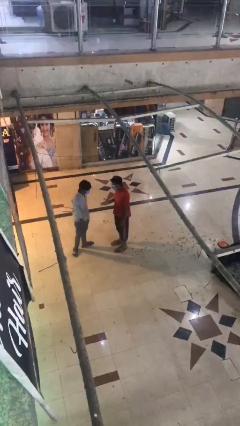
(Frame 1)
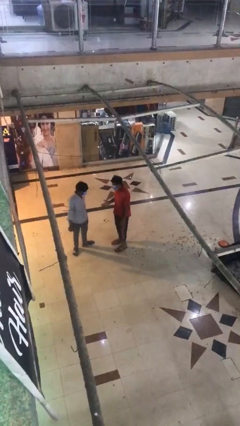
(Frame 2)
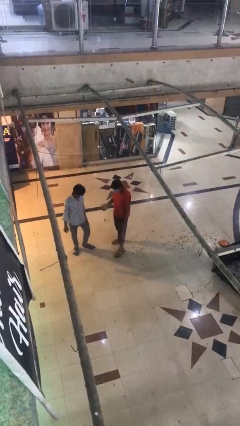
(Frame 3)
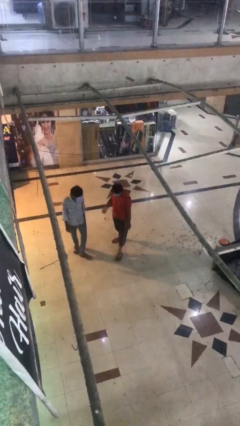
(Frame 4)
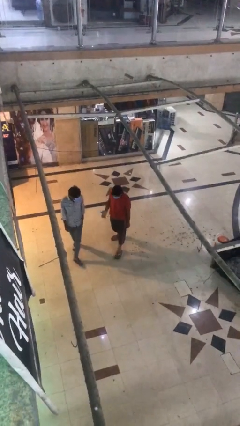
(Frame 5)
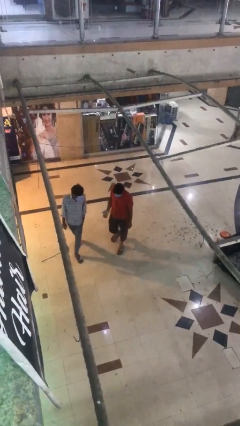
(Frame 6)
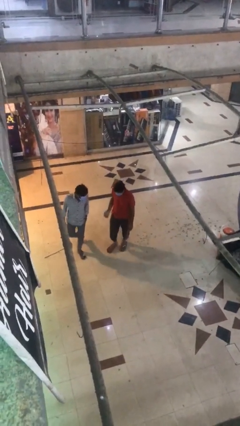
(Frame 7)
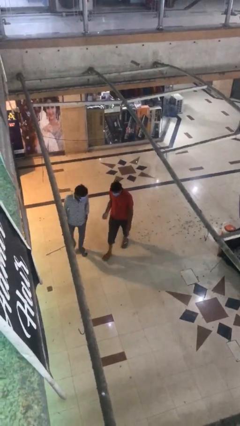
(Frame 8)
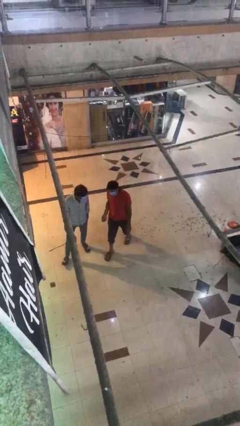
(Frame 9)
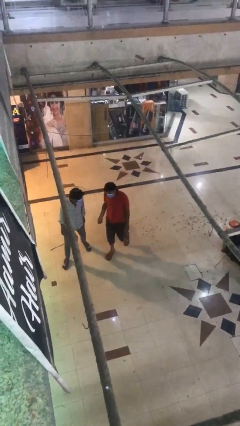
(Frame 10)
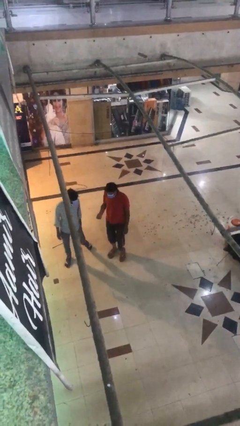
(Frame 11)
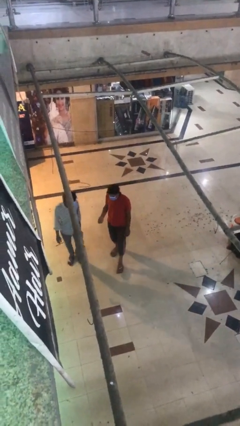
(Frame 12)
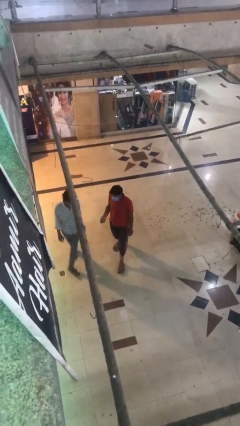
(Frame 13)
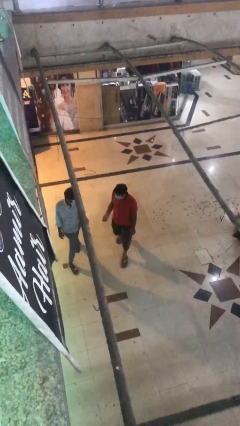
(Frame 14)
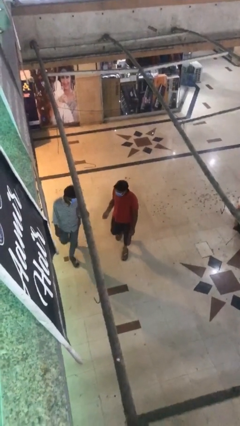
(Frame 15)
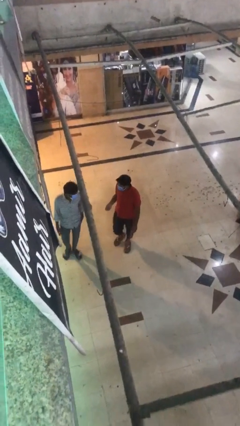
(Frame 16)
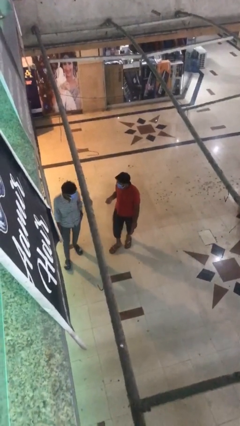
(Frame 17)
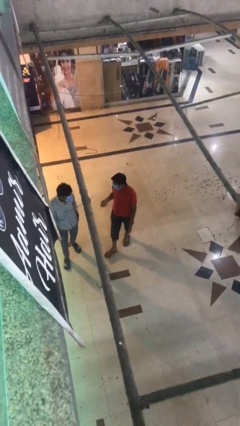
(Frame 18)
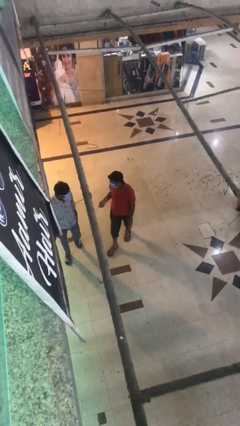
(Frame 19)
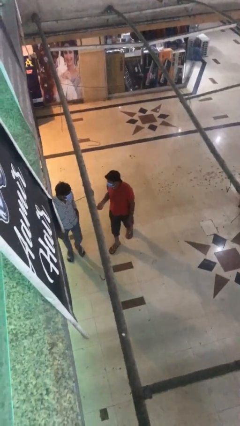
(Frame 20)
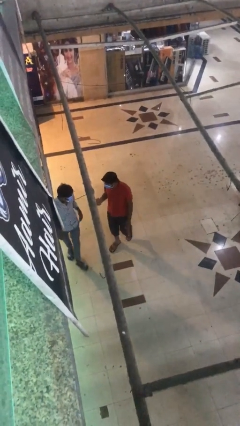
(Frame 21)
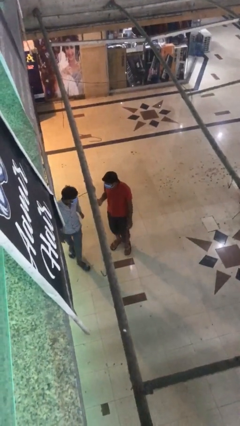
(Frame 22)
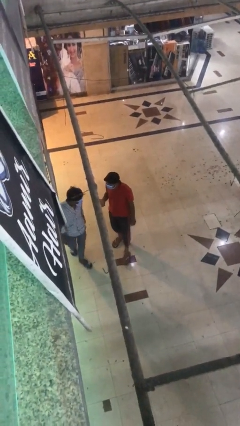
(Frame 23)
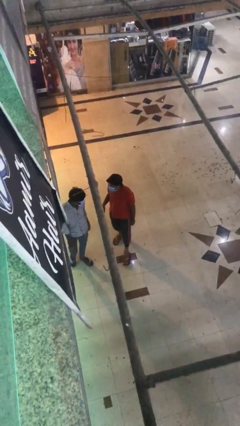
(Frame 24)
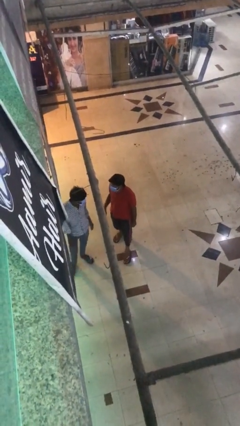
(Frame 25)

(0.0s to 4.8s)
person talks to person

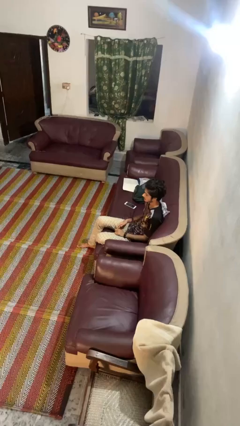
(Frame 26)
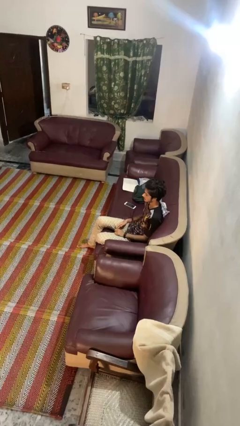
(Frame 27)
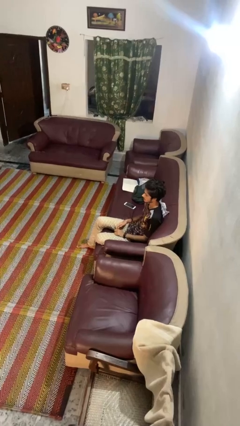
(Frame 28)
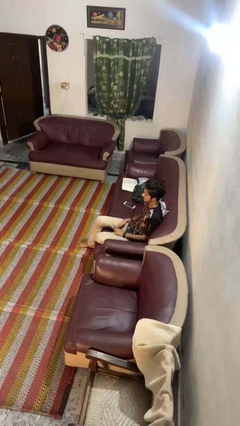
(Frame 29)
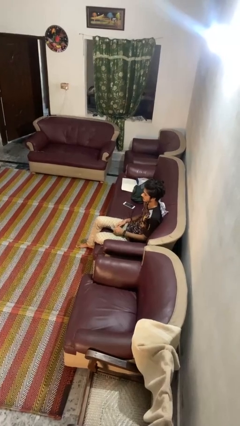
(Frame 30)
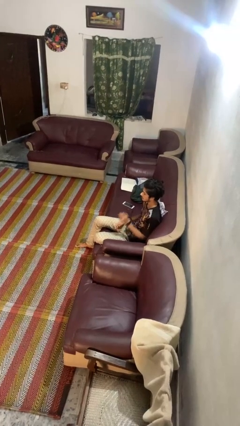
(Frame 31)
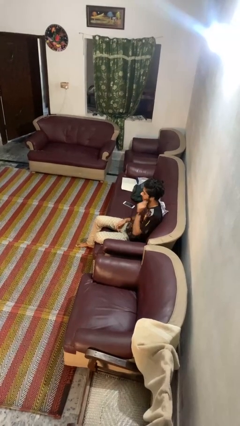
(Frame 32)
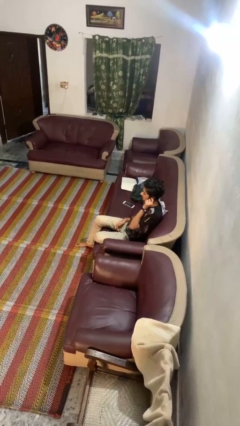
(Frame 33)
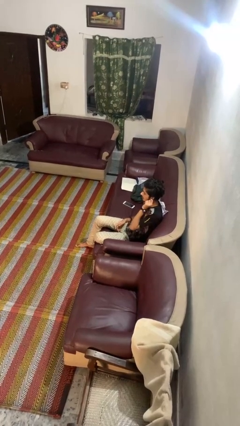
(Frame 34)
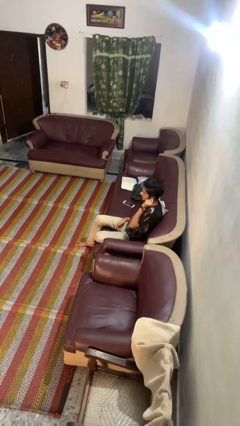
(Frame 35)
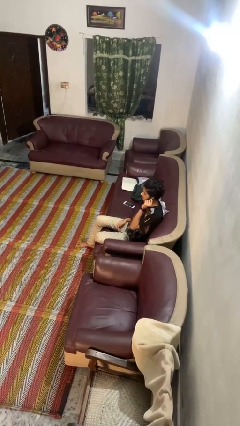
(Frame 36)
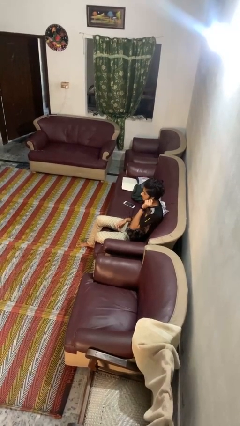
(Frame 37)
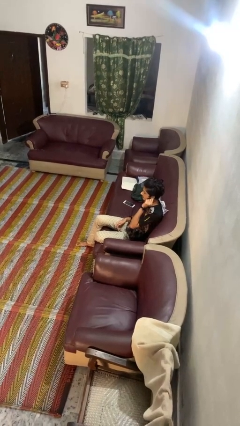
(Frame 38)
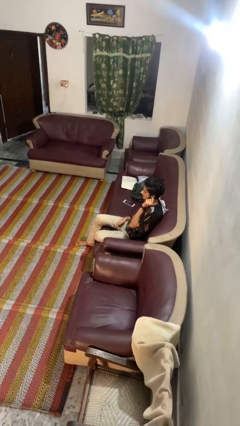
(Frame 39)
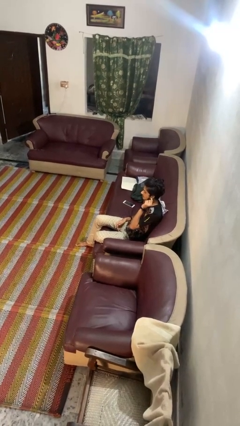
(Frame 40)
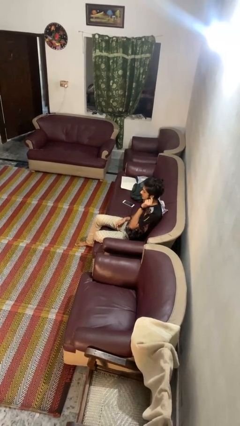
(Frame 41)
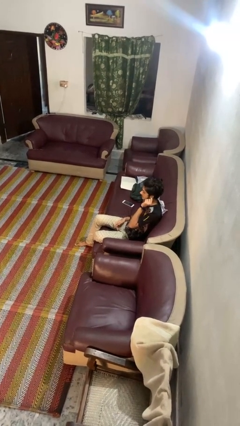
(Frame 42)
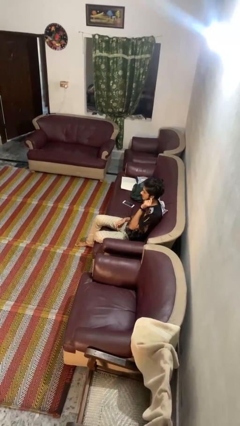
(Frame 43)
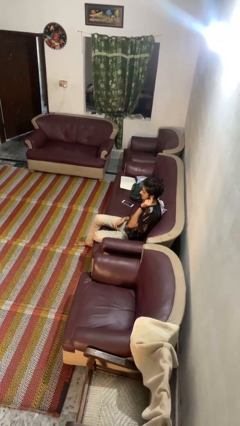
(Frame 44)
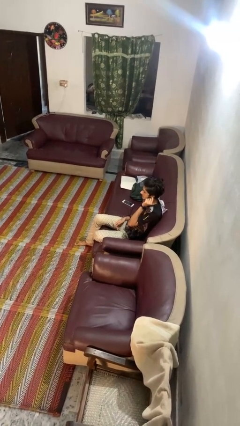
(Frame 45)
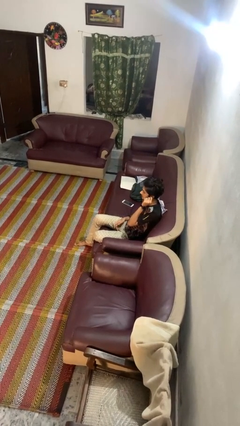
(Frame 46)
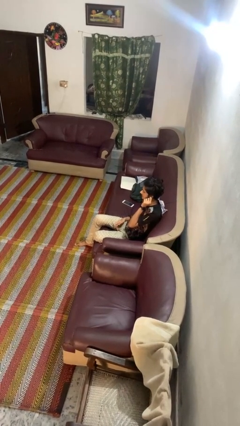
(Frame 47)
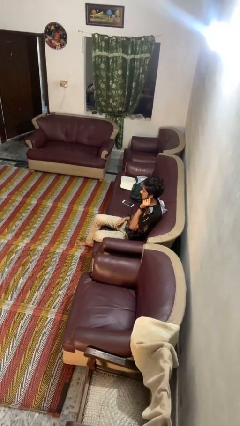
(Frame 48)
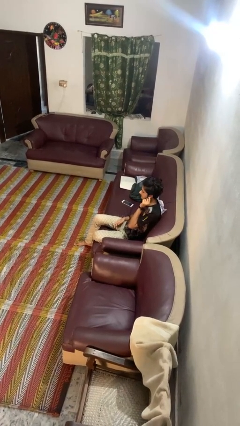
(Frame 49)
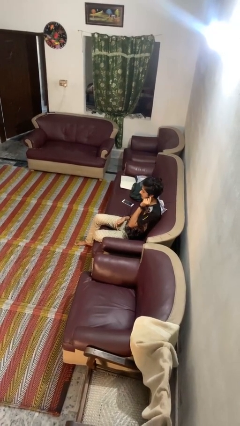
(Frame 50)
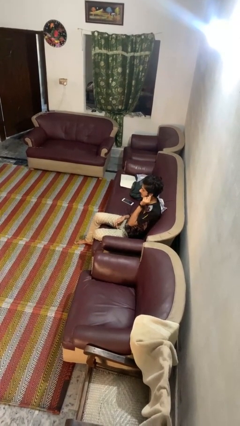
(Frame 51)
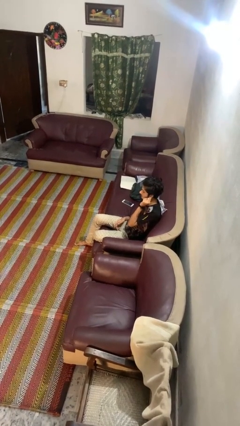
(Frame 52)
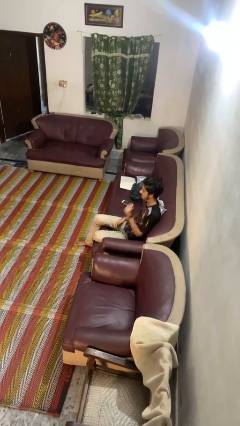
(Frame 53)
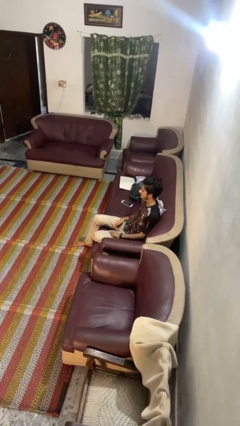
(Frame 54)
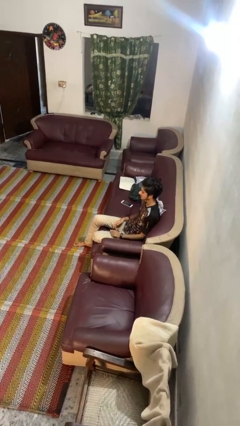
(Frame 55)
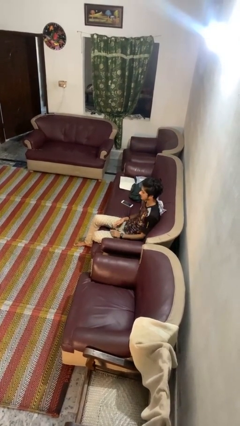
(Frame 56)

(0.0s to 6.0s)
person touches earlobe

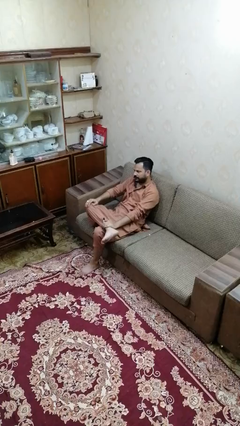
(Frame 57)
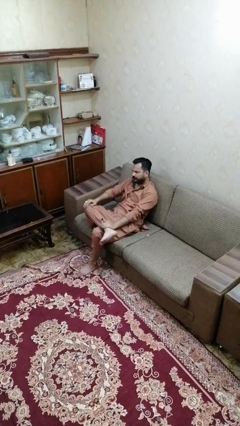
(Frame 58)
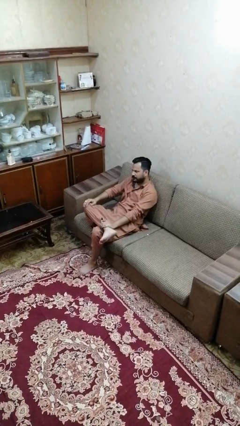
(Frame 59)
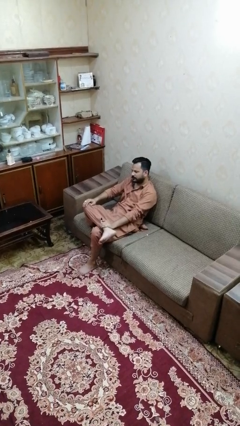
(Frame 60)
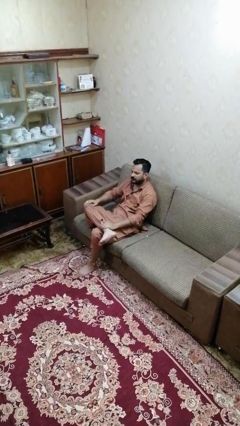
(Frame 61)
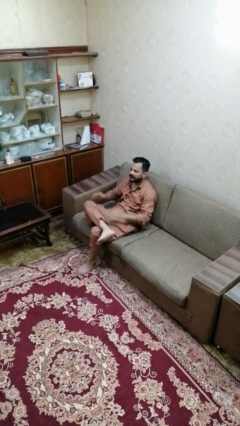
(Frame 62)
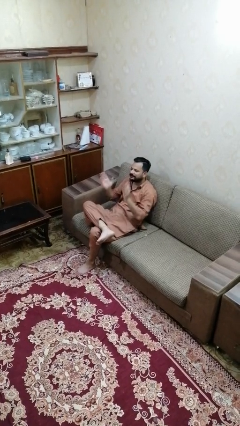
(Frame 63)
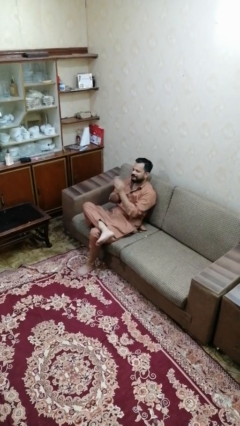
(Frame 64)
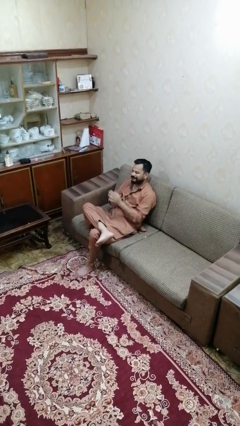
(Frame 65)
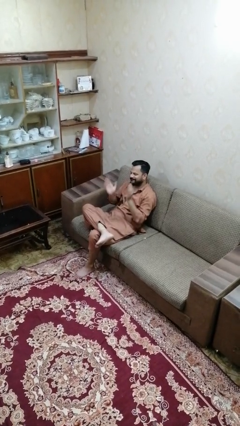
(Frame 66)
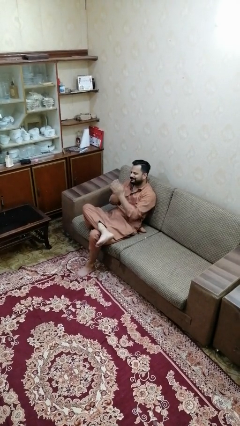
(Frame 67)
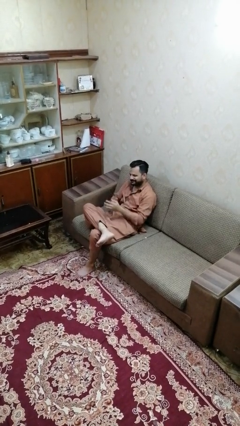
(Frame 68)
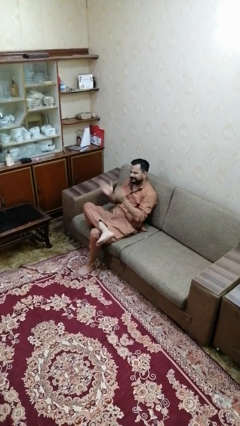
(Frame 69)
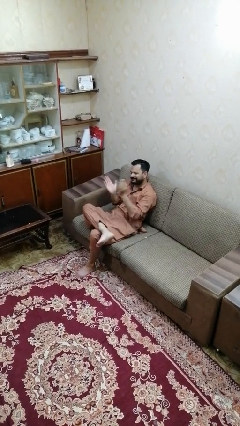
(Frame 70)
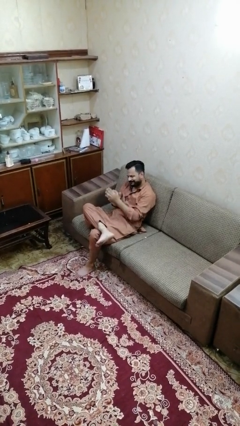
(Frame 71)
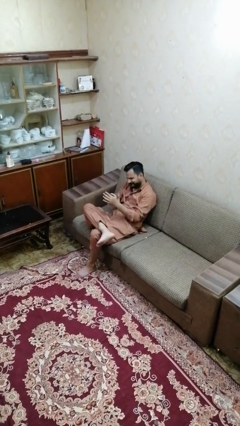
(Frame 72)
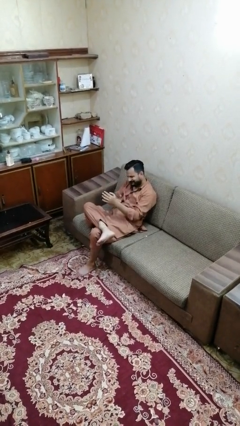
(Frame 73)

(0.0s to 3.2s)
person claps hands

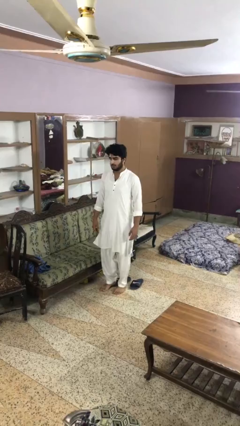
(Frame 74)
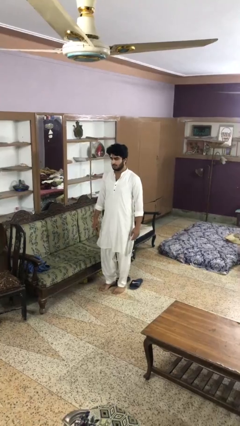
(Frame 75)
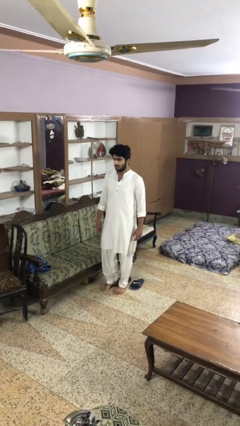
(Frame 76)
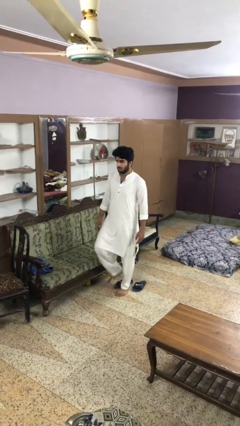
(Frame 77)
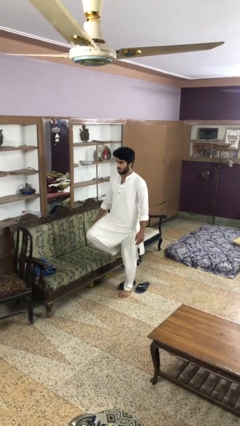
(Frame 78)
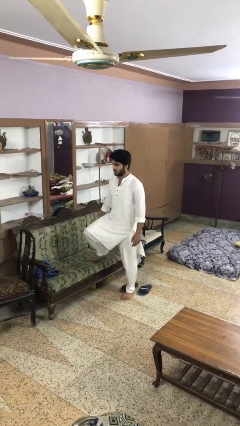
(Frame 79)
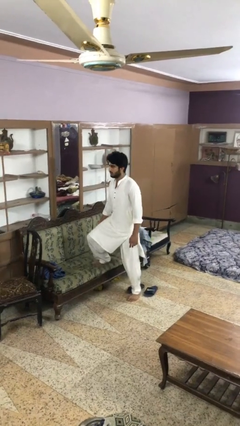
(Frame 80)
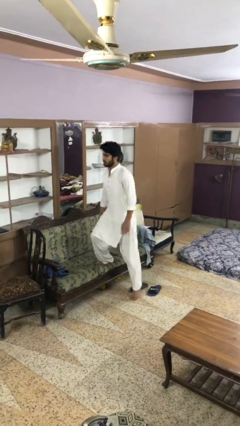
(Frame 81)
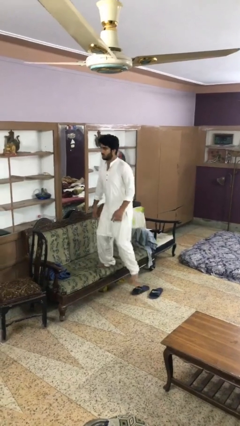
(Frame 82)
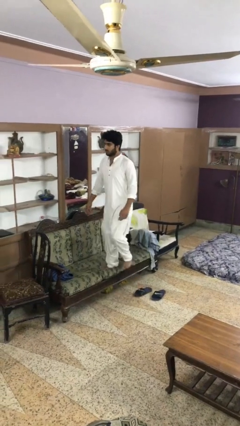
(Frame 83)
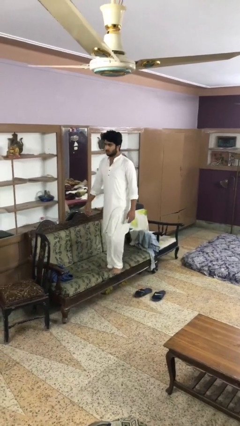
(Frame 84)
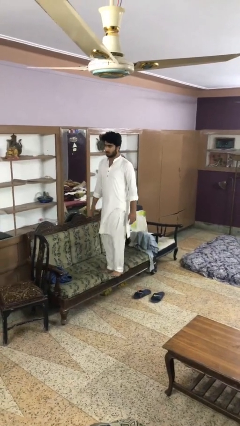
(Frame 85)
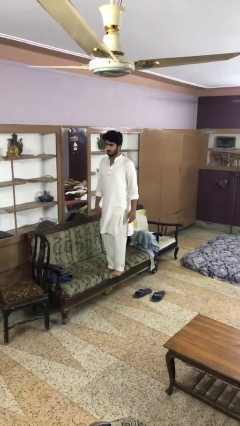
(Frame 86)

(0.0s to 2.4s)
person climbs on couch

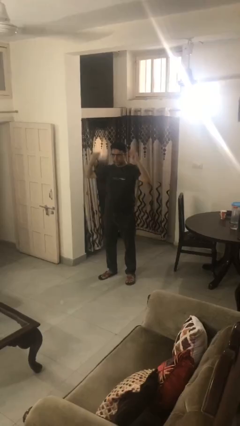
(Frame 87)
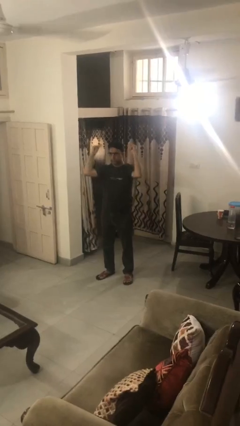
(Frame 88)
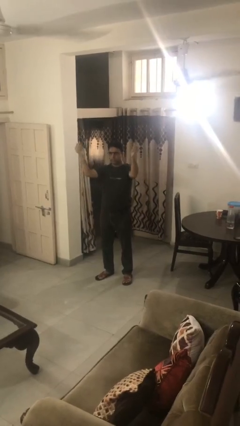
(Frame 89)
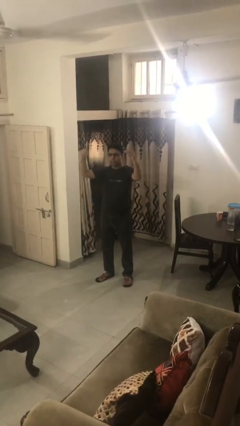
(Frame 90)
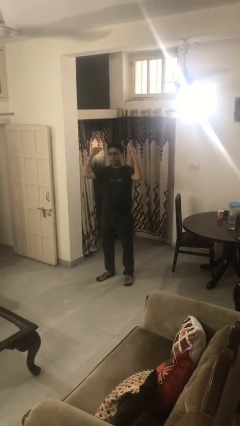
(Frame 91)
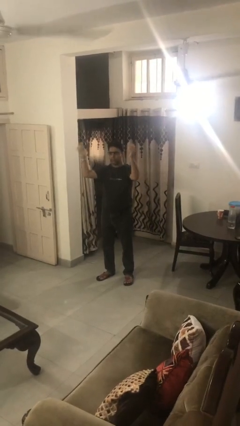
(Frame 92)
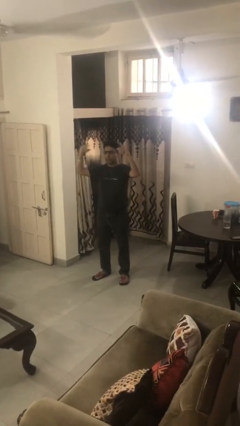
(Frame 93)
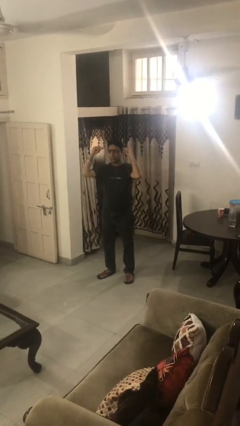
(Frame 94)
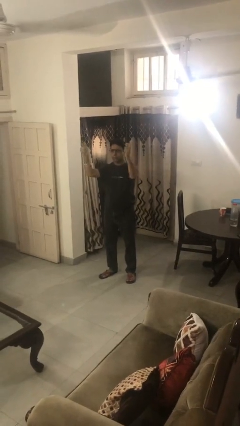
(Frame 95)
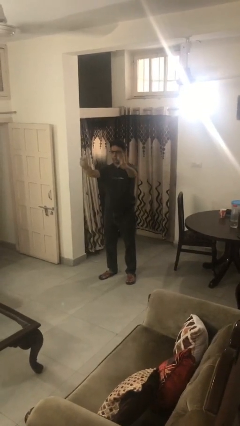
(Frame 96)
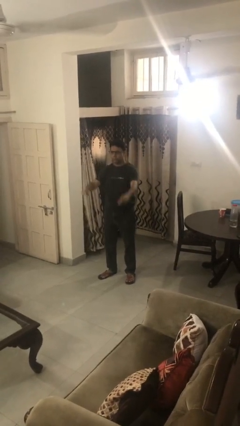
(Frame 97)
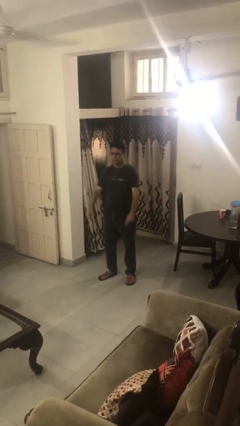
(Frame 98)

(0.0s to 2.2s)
person snaps fingers
